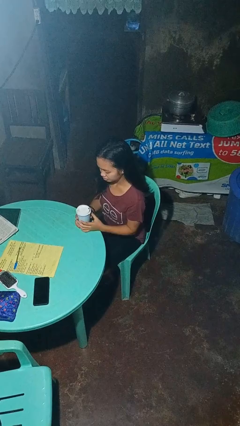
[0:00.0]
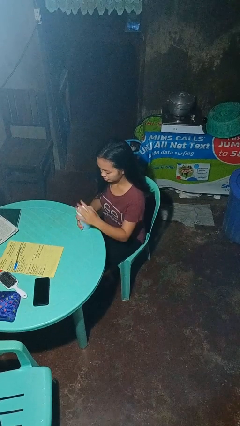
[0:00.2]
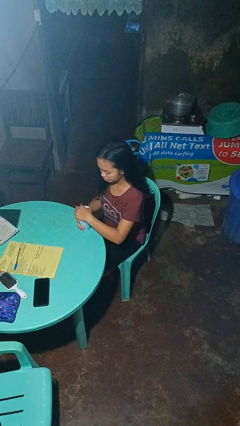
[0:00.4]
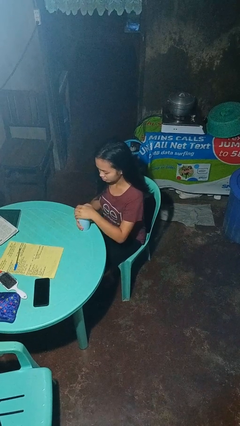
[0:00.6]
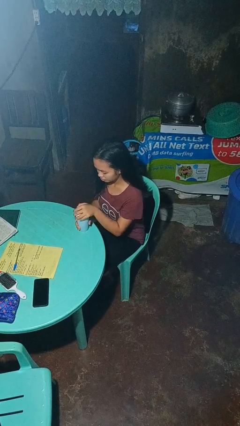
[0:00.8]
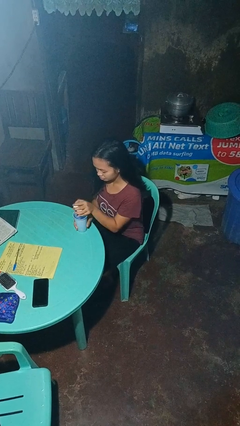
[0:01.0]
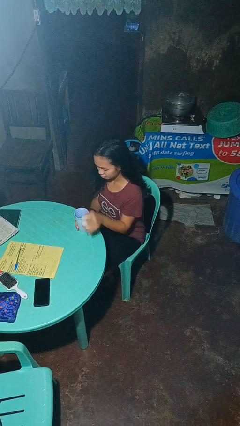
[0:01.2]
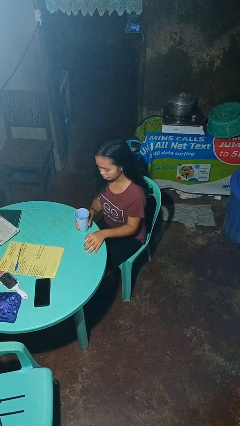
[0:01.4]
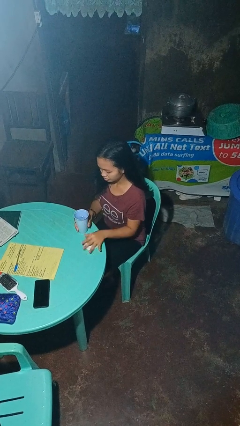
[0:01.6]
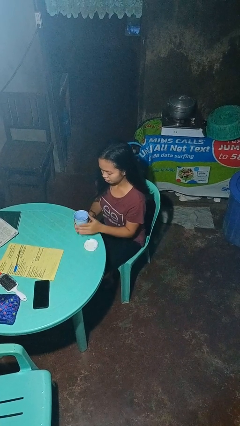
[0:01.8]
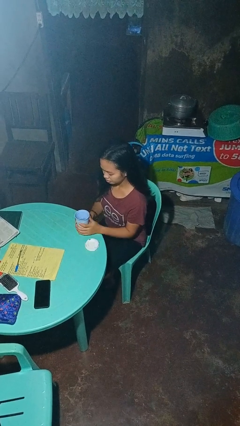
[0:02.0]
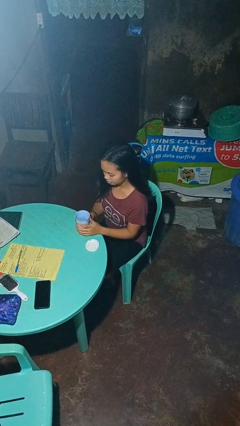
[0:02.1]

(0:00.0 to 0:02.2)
person unscrews lid from bottle

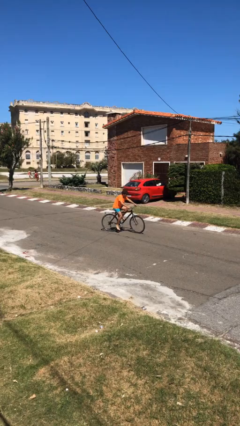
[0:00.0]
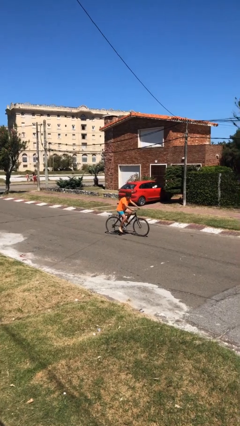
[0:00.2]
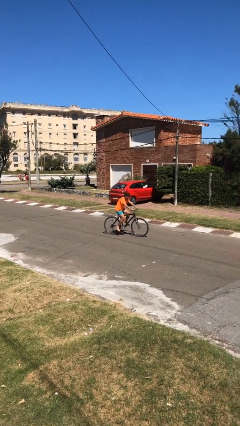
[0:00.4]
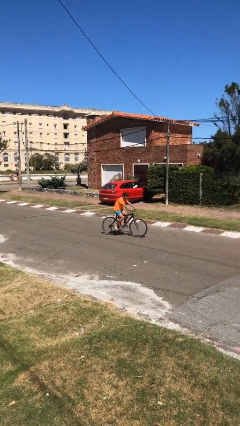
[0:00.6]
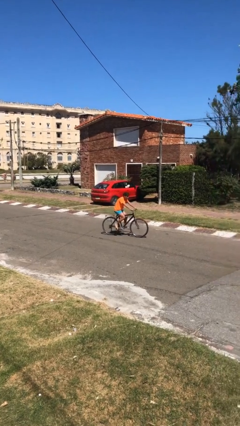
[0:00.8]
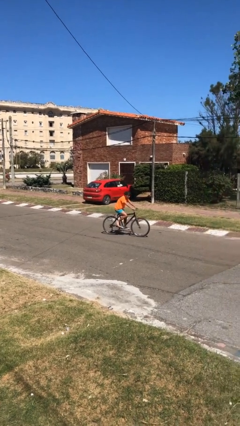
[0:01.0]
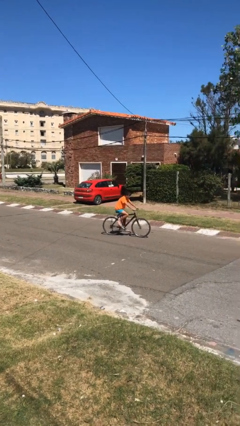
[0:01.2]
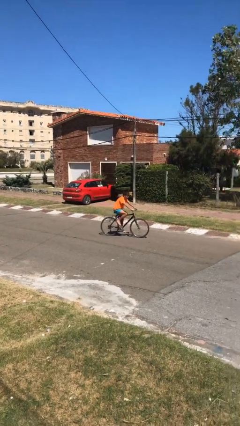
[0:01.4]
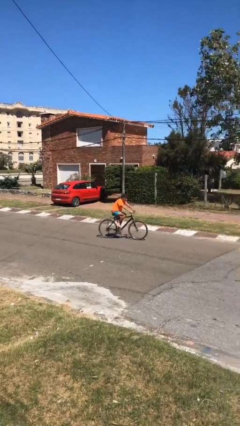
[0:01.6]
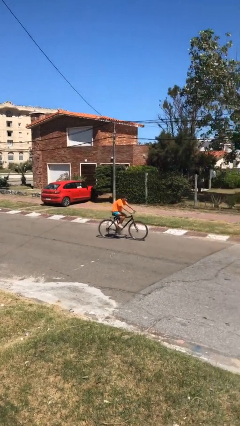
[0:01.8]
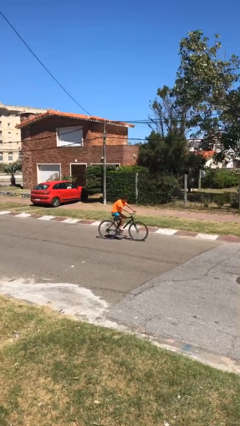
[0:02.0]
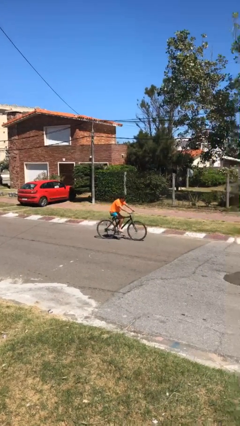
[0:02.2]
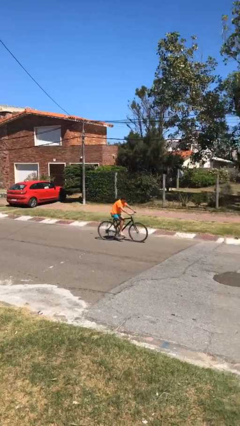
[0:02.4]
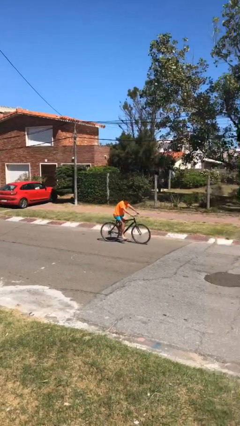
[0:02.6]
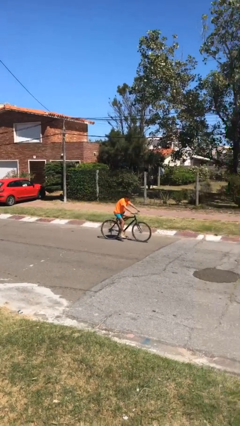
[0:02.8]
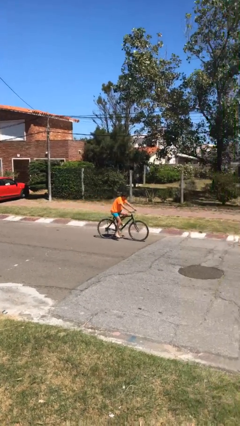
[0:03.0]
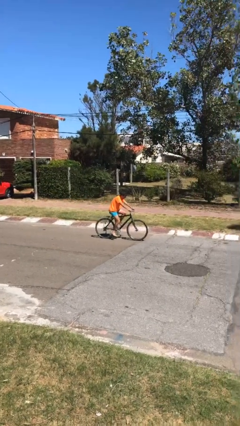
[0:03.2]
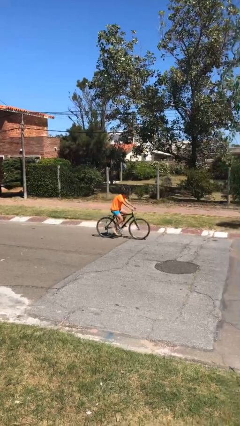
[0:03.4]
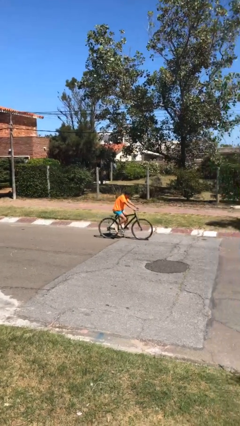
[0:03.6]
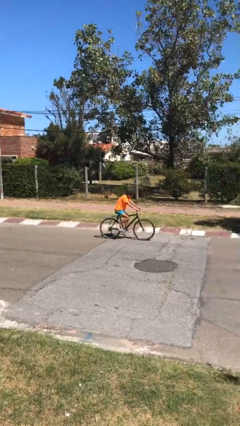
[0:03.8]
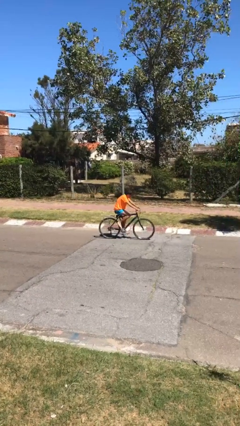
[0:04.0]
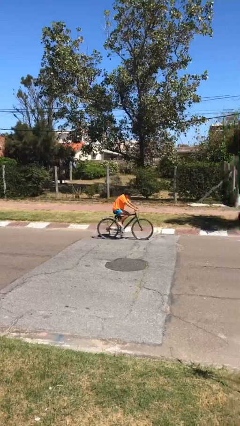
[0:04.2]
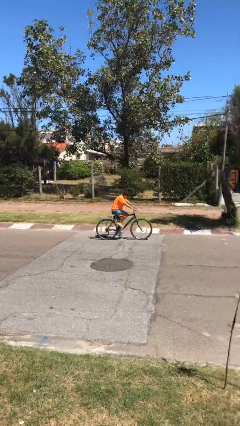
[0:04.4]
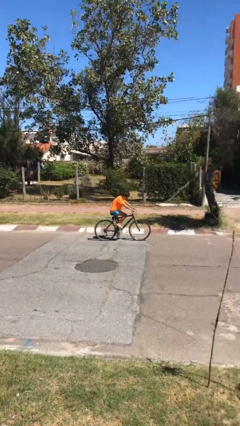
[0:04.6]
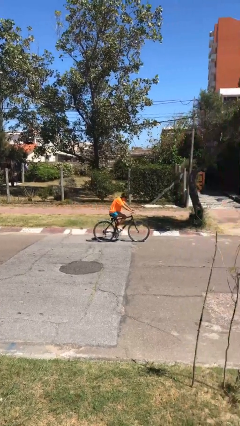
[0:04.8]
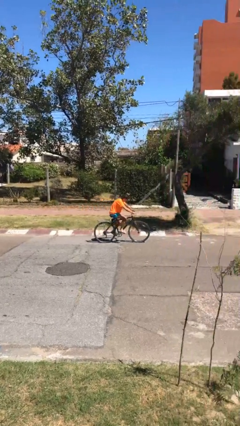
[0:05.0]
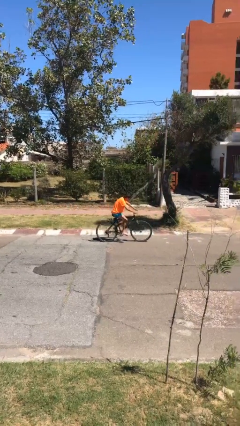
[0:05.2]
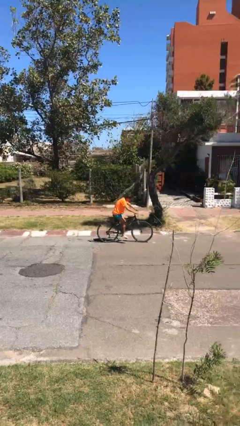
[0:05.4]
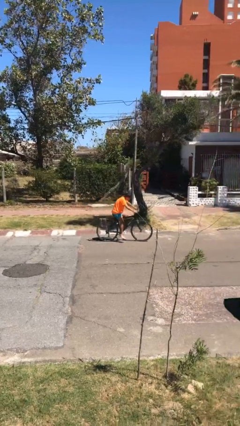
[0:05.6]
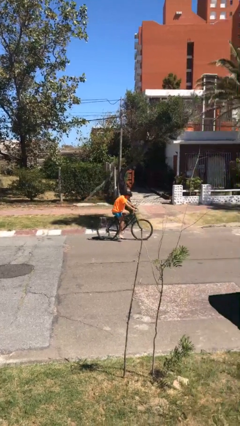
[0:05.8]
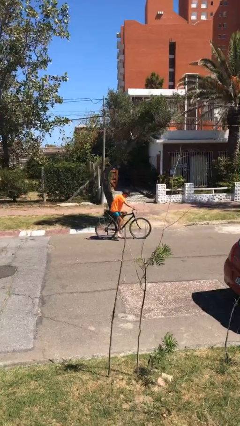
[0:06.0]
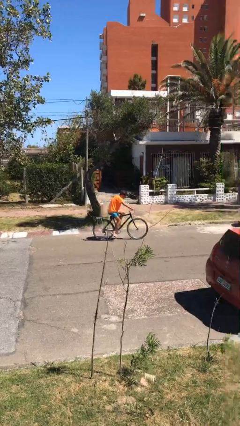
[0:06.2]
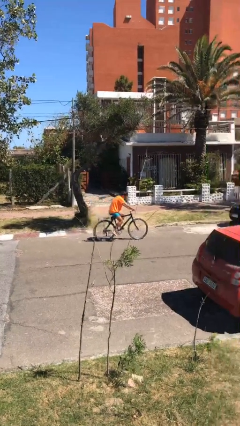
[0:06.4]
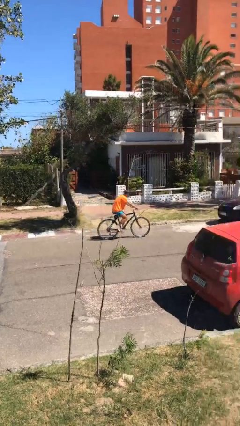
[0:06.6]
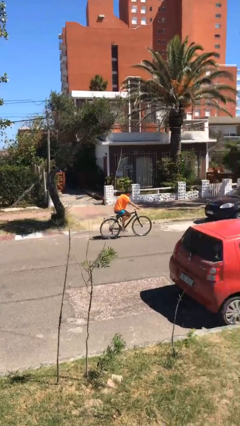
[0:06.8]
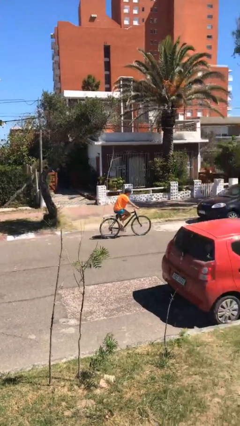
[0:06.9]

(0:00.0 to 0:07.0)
person rides bicycle

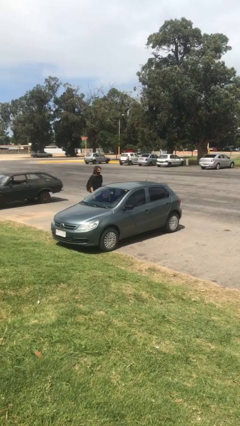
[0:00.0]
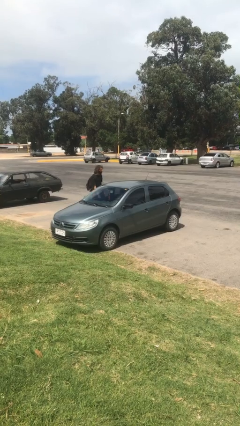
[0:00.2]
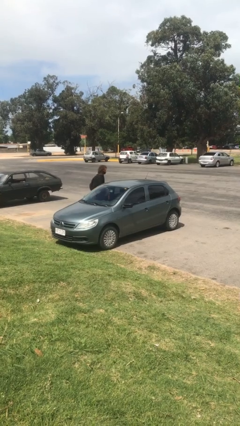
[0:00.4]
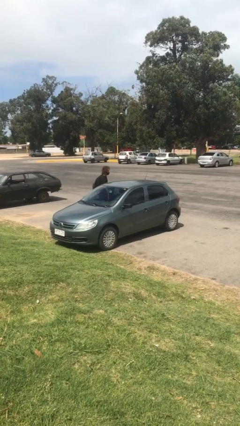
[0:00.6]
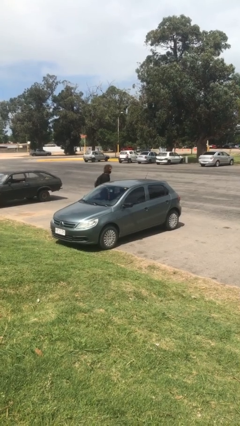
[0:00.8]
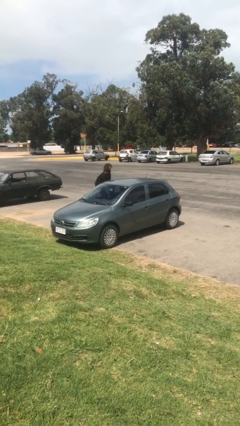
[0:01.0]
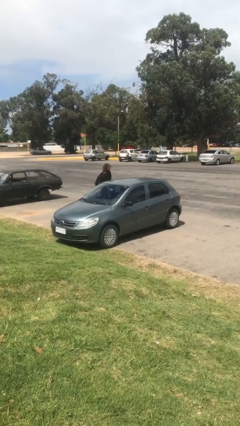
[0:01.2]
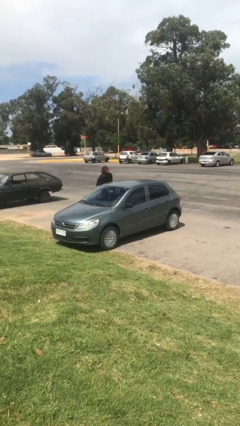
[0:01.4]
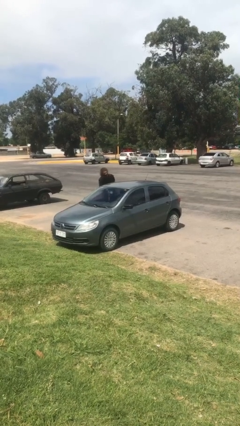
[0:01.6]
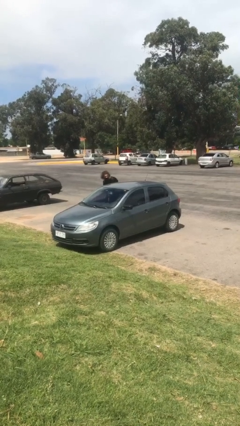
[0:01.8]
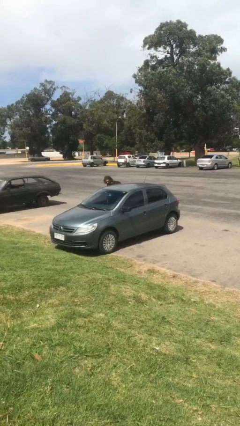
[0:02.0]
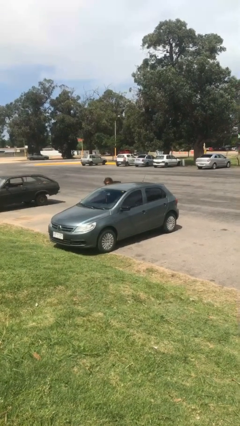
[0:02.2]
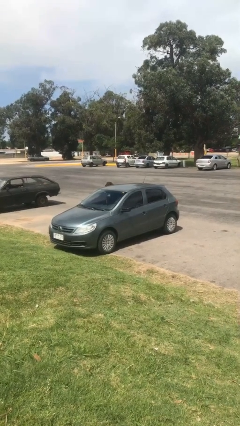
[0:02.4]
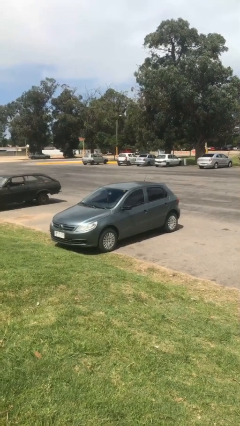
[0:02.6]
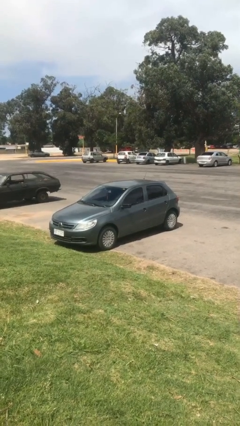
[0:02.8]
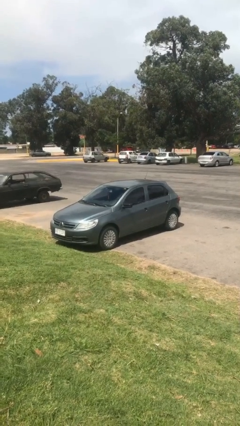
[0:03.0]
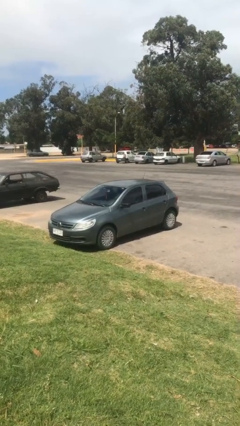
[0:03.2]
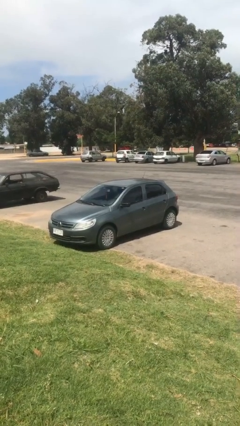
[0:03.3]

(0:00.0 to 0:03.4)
car picks up person

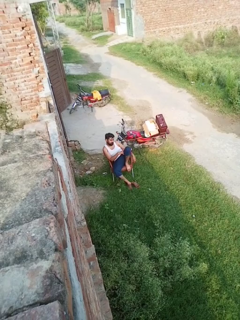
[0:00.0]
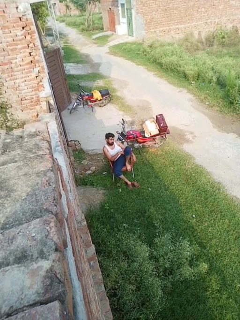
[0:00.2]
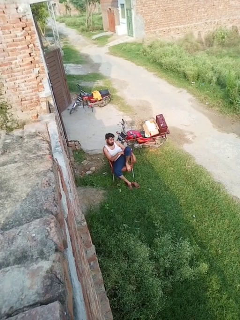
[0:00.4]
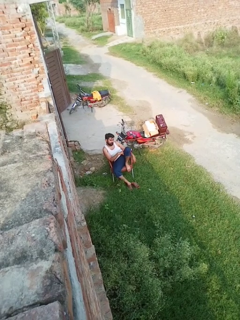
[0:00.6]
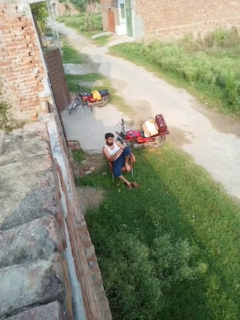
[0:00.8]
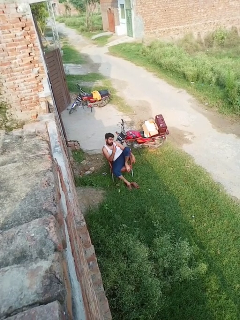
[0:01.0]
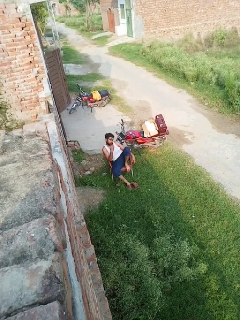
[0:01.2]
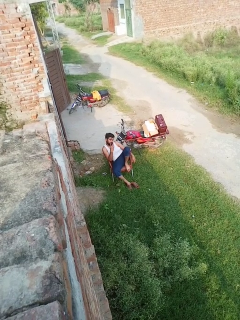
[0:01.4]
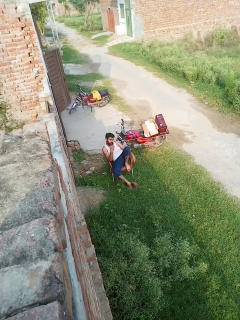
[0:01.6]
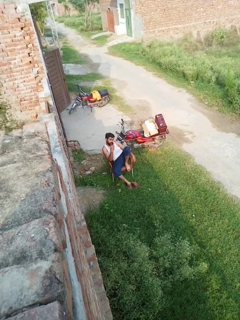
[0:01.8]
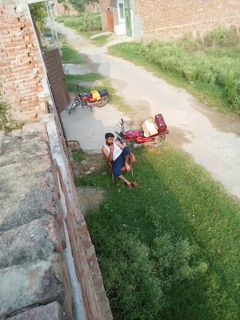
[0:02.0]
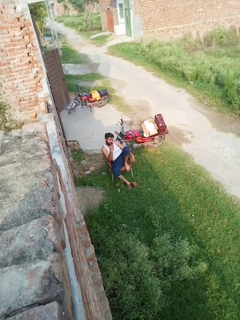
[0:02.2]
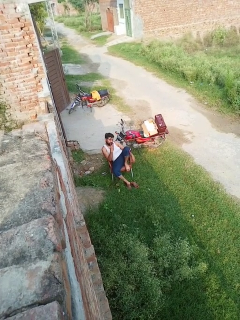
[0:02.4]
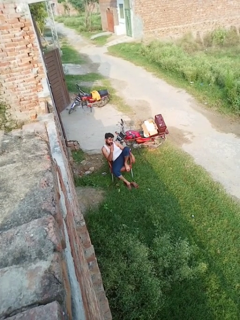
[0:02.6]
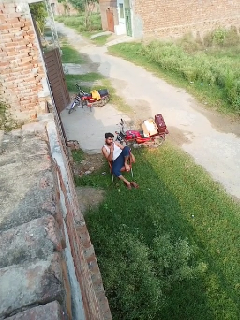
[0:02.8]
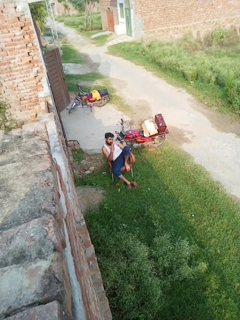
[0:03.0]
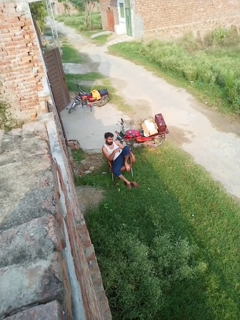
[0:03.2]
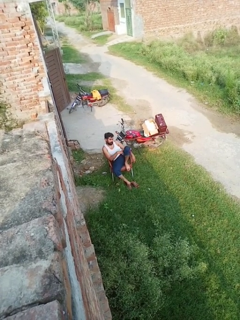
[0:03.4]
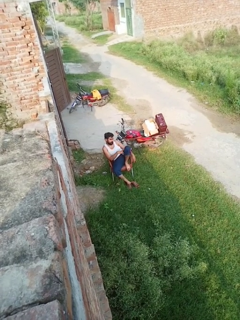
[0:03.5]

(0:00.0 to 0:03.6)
person gestures peace

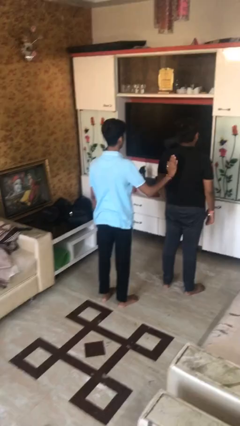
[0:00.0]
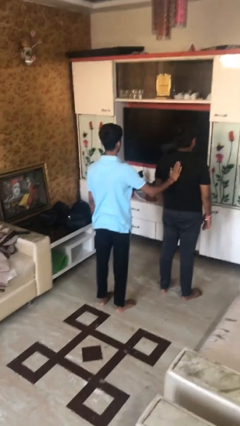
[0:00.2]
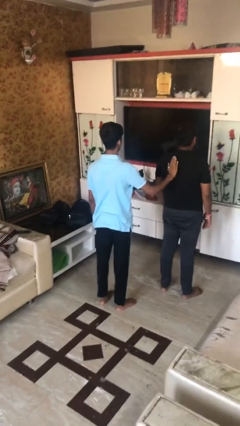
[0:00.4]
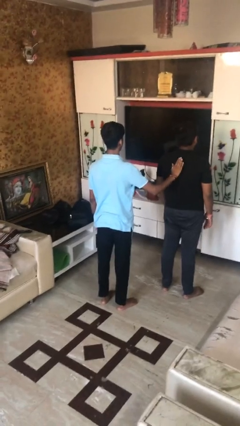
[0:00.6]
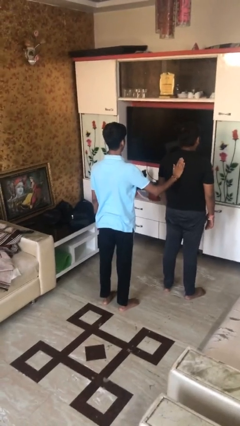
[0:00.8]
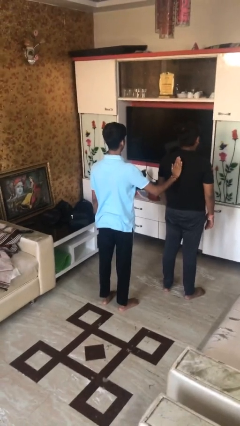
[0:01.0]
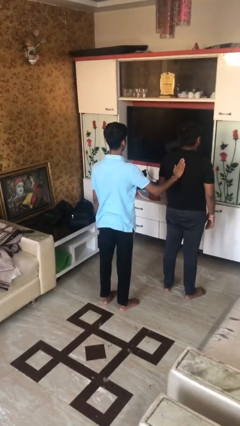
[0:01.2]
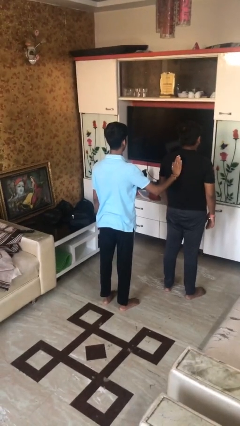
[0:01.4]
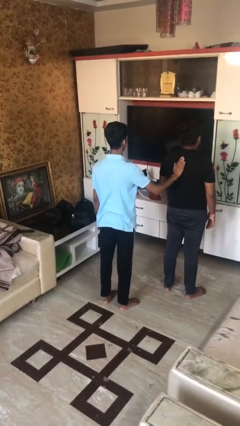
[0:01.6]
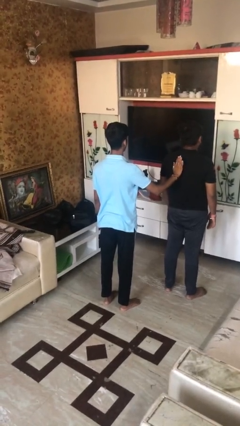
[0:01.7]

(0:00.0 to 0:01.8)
person touches back of person
